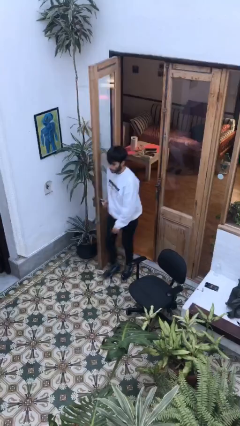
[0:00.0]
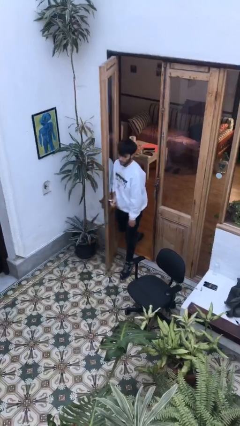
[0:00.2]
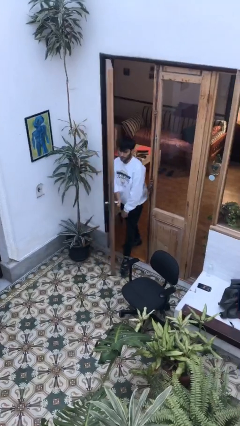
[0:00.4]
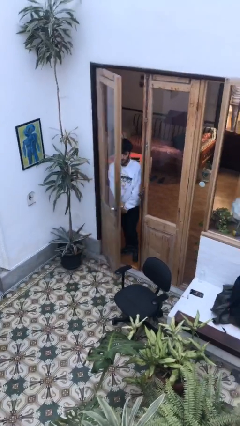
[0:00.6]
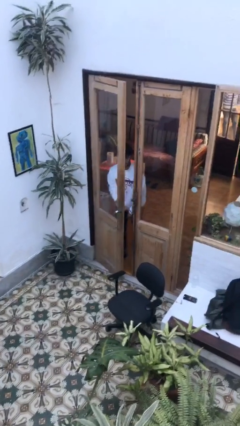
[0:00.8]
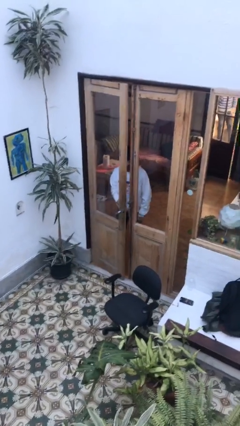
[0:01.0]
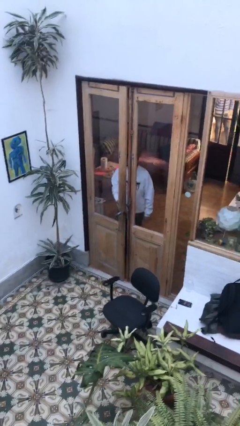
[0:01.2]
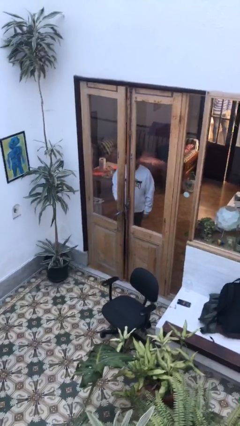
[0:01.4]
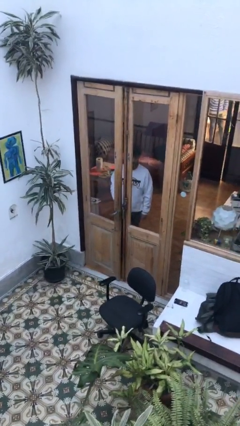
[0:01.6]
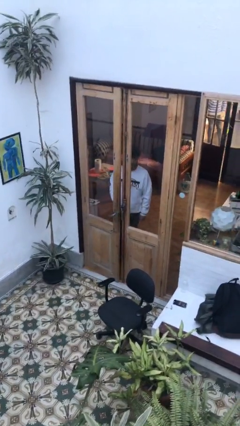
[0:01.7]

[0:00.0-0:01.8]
person closes facility door

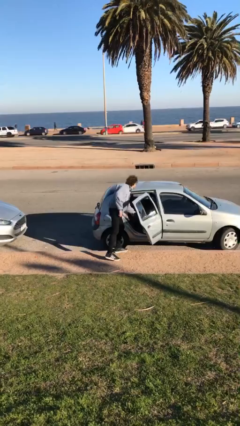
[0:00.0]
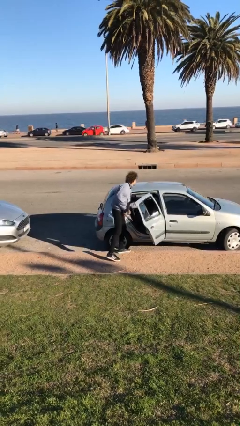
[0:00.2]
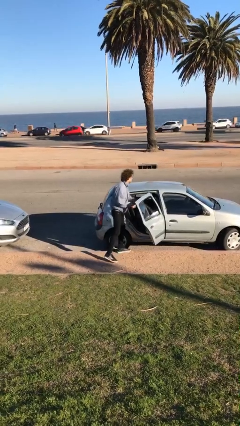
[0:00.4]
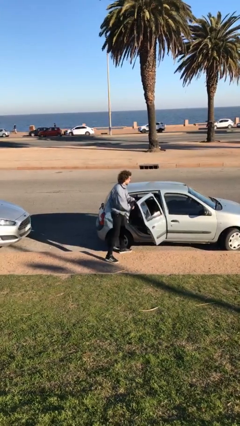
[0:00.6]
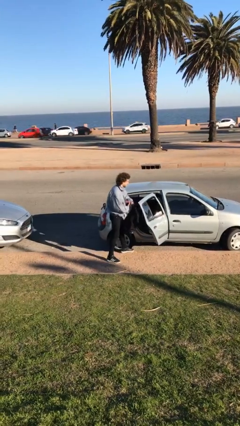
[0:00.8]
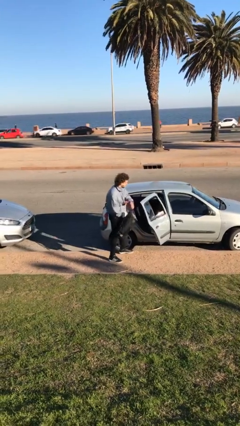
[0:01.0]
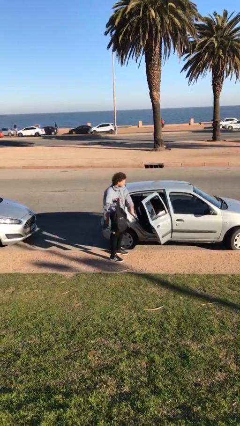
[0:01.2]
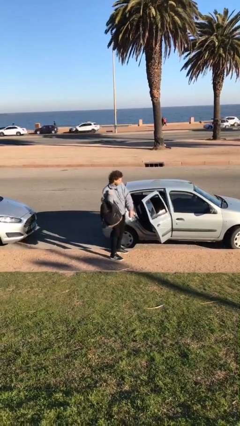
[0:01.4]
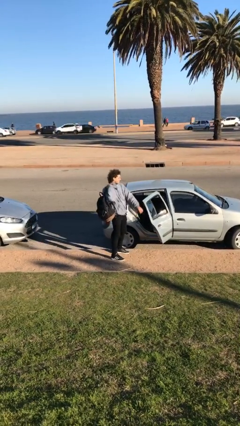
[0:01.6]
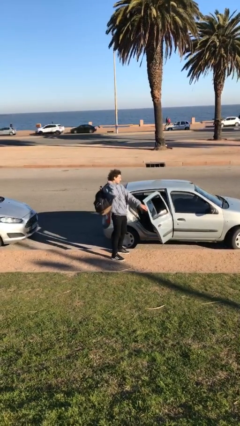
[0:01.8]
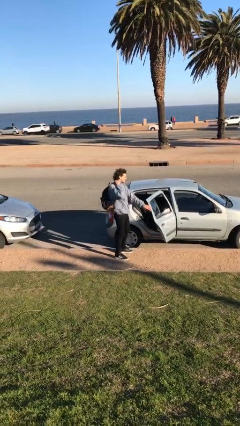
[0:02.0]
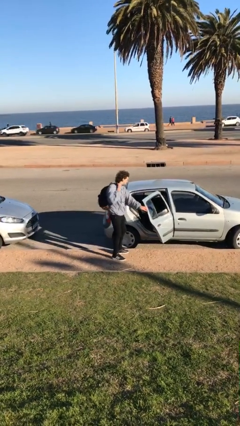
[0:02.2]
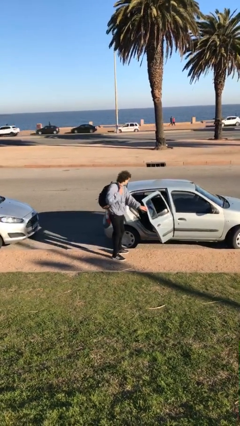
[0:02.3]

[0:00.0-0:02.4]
person unloads car

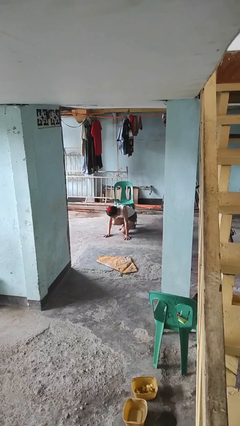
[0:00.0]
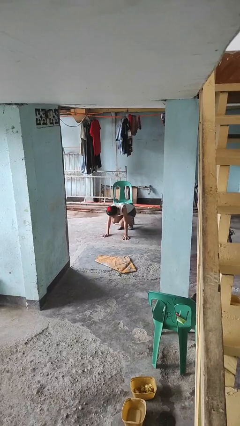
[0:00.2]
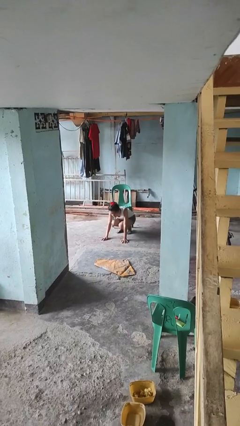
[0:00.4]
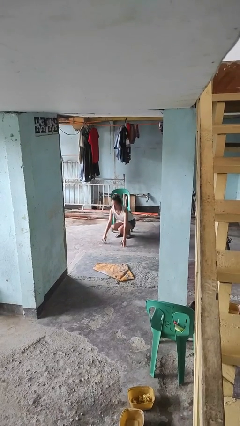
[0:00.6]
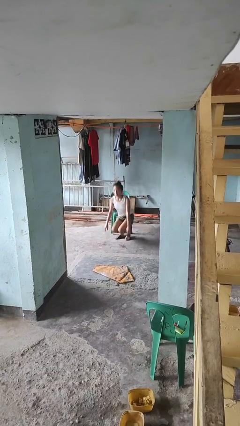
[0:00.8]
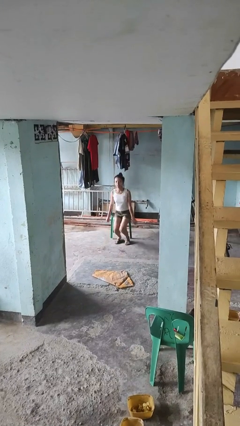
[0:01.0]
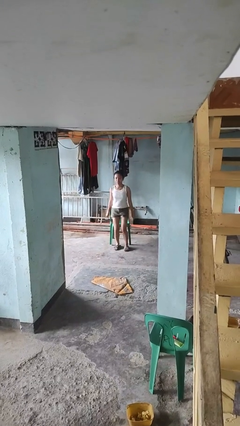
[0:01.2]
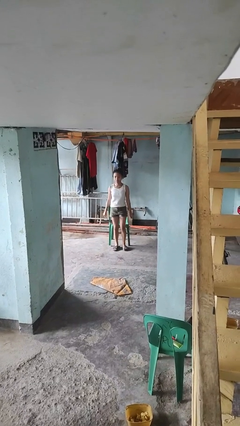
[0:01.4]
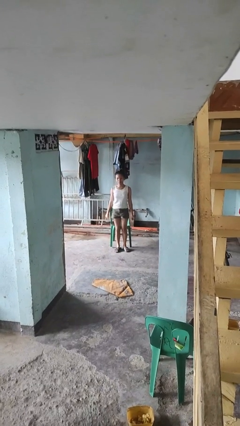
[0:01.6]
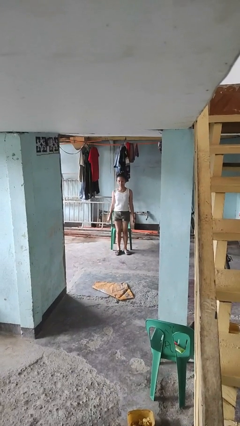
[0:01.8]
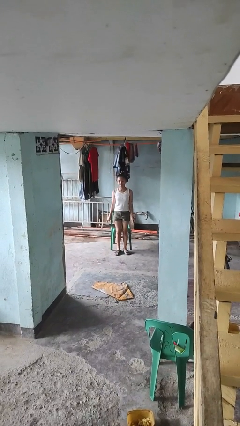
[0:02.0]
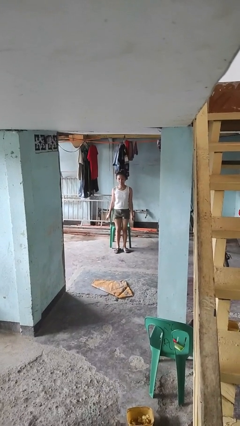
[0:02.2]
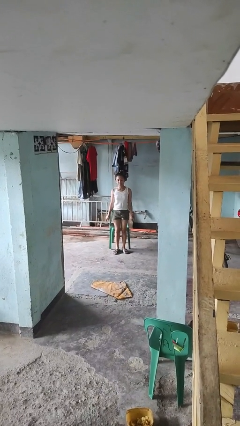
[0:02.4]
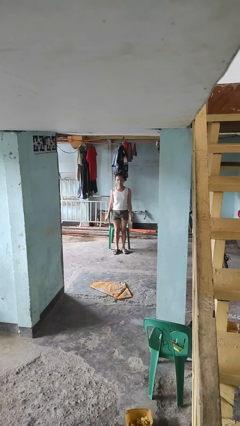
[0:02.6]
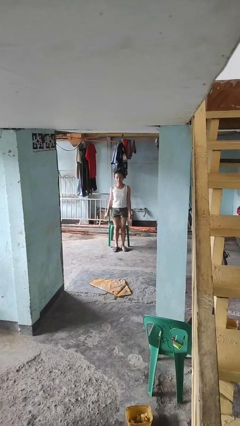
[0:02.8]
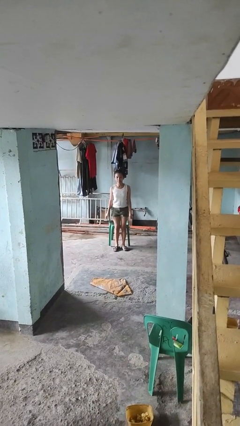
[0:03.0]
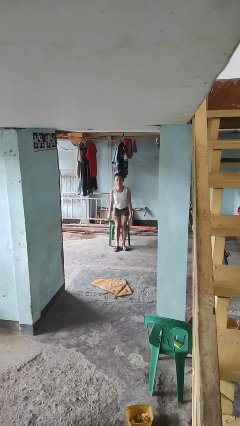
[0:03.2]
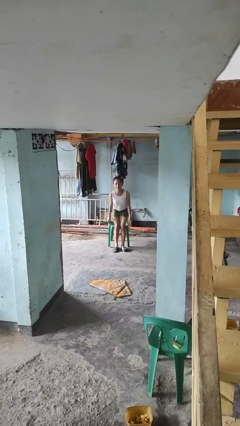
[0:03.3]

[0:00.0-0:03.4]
person stands up from floor

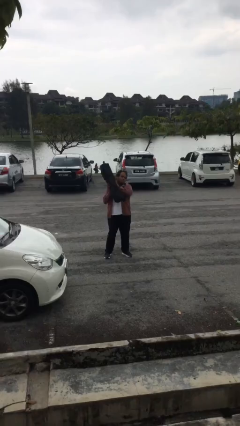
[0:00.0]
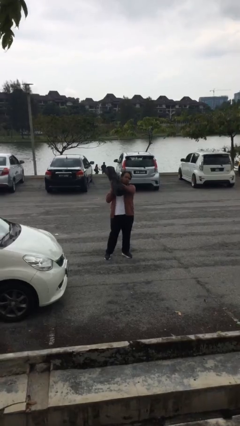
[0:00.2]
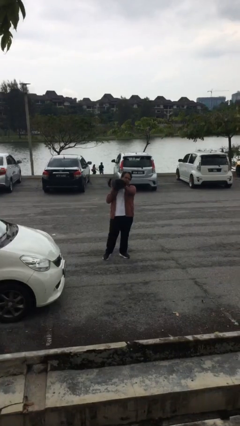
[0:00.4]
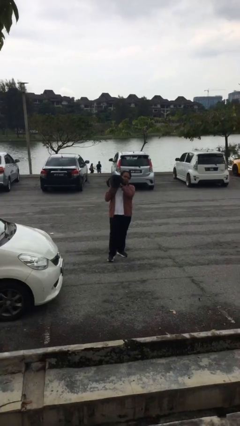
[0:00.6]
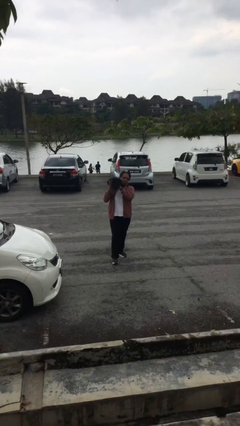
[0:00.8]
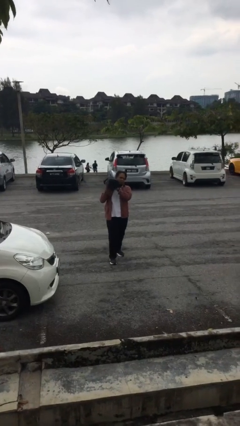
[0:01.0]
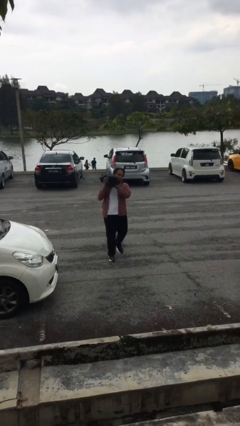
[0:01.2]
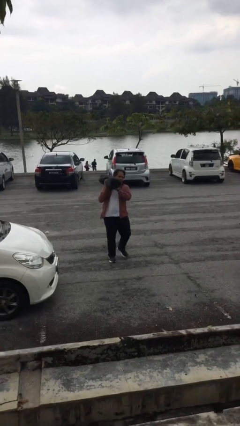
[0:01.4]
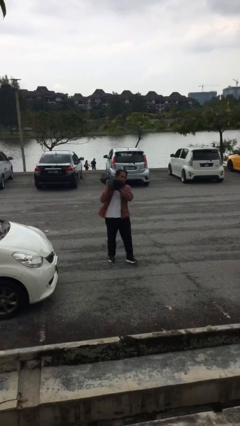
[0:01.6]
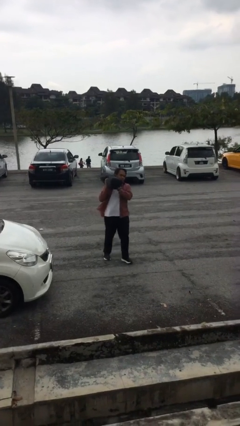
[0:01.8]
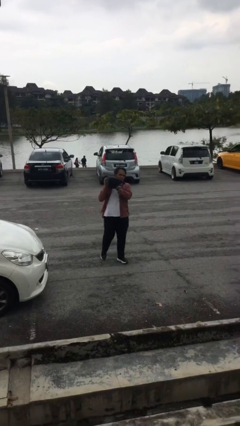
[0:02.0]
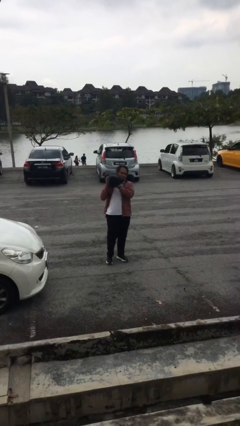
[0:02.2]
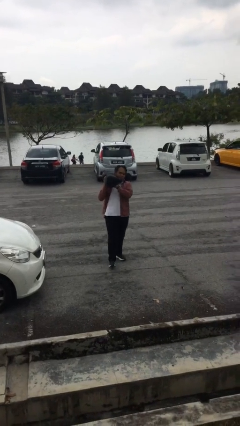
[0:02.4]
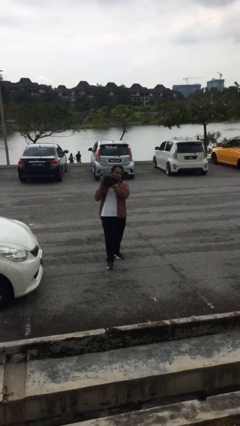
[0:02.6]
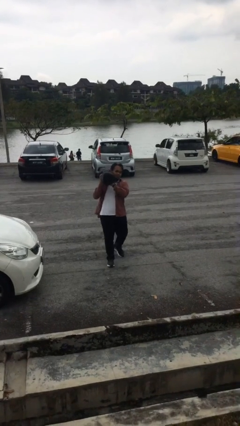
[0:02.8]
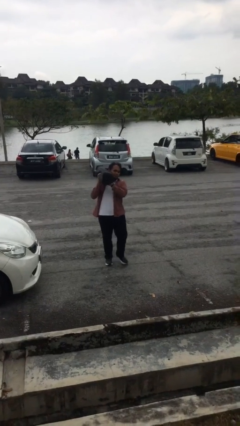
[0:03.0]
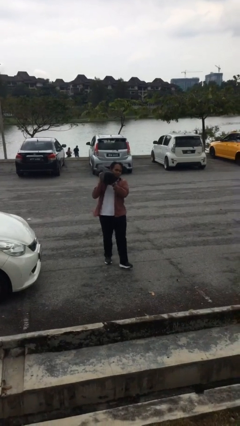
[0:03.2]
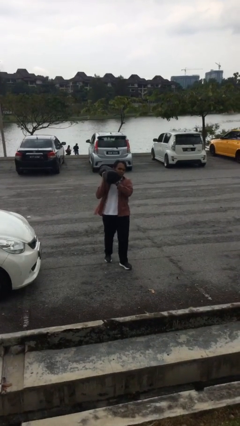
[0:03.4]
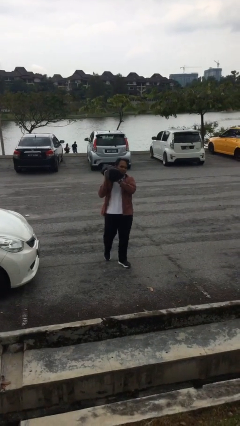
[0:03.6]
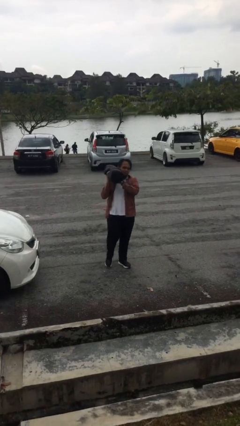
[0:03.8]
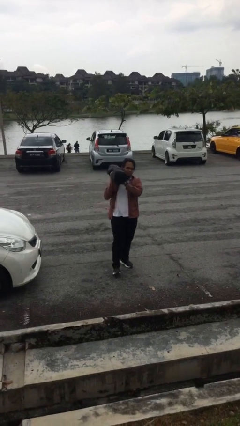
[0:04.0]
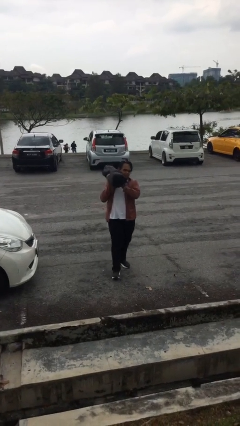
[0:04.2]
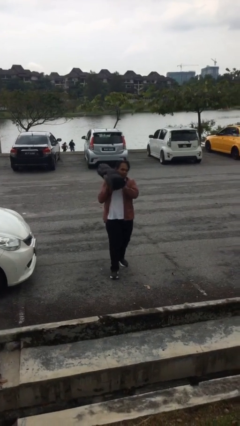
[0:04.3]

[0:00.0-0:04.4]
person carries heavy object

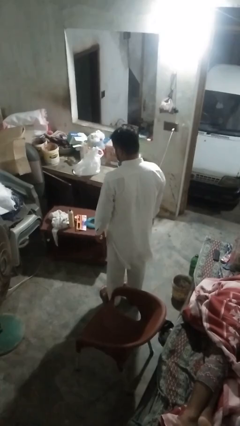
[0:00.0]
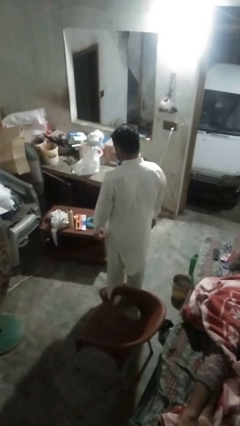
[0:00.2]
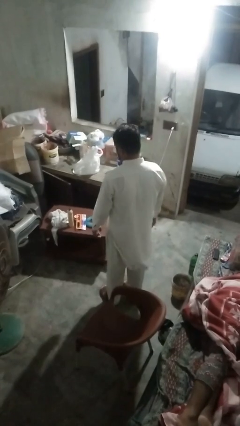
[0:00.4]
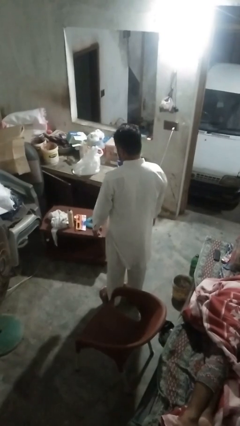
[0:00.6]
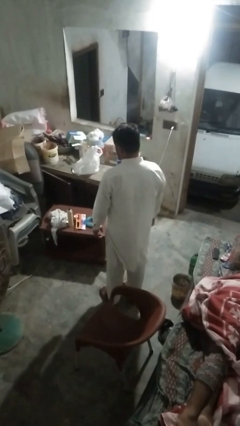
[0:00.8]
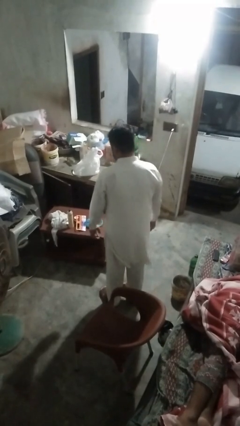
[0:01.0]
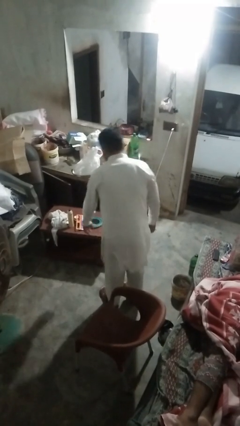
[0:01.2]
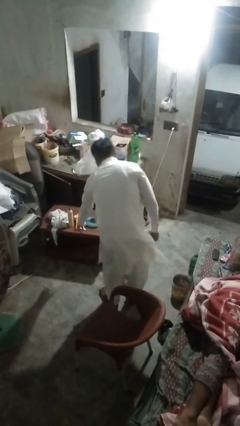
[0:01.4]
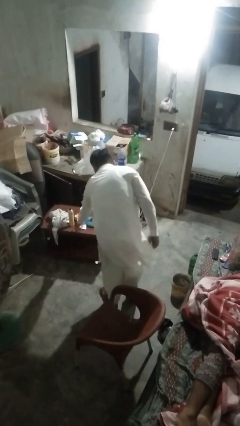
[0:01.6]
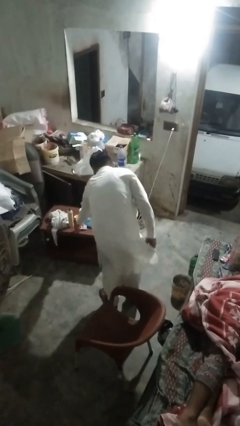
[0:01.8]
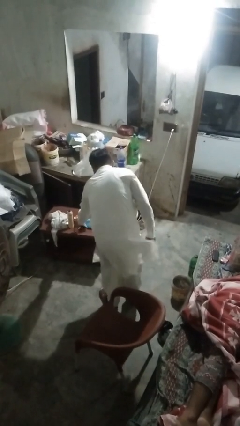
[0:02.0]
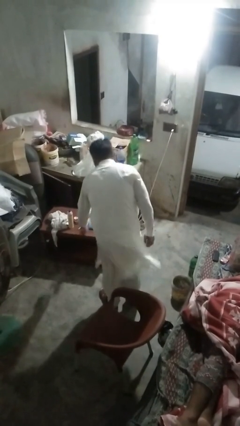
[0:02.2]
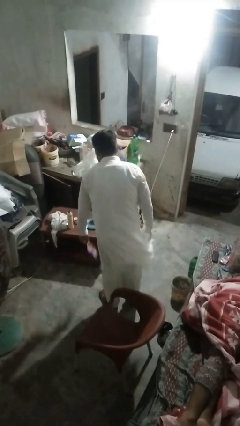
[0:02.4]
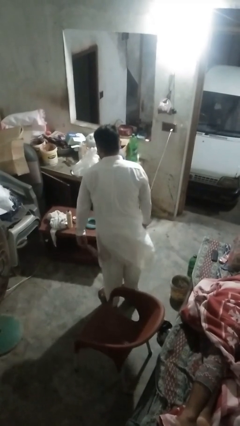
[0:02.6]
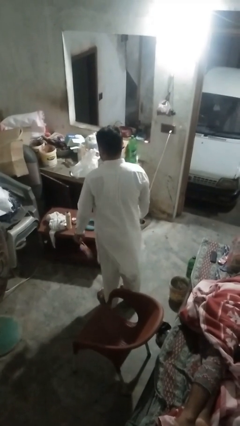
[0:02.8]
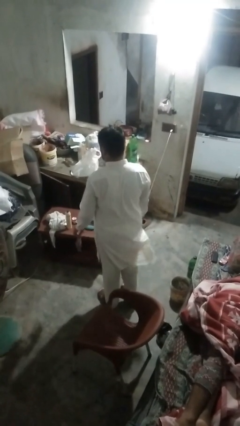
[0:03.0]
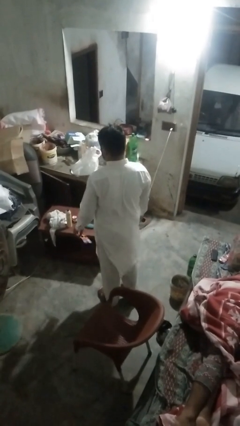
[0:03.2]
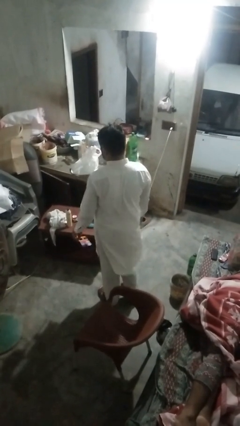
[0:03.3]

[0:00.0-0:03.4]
person picks up object from table

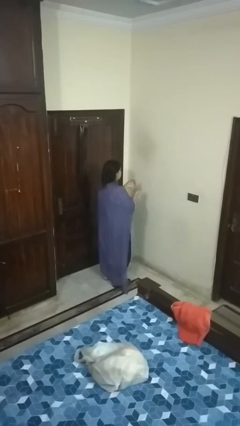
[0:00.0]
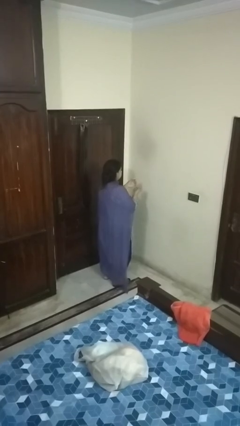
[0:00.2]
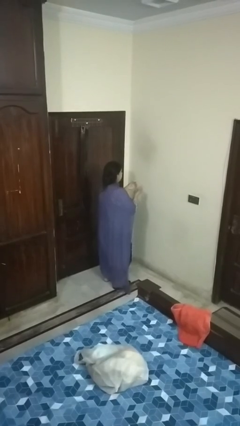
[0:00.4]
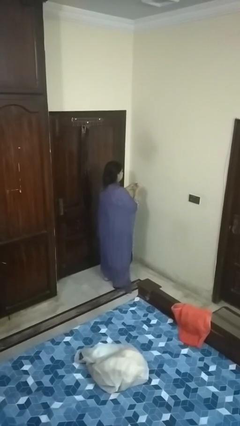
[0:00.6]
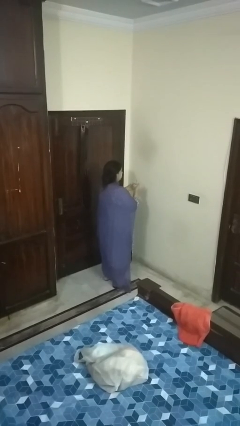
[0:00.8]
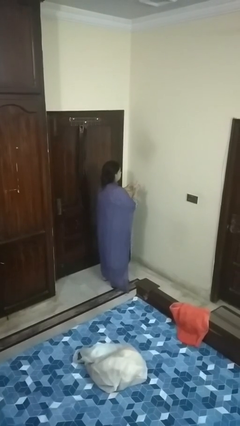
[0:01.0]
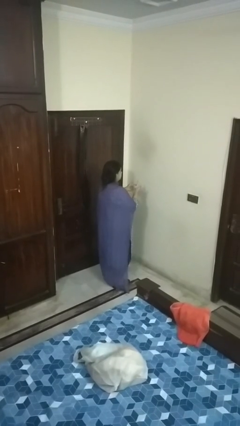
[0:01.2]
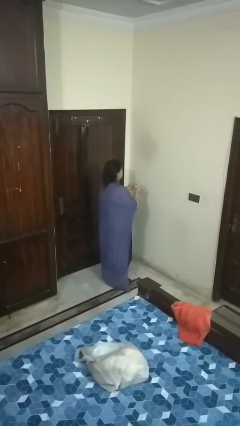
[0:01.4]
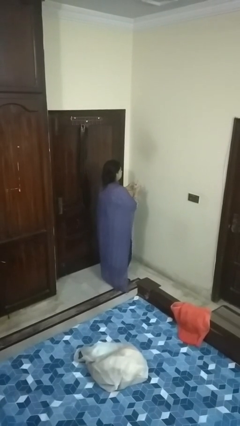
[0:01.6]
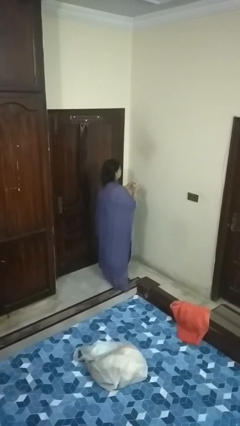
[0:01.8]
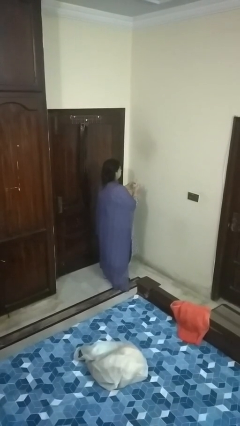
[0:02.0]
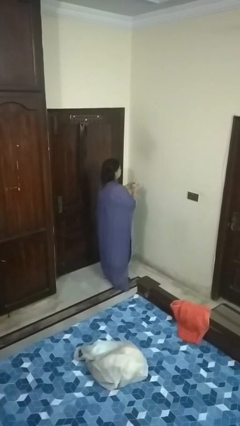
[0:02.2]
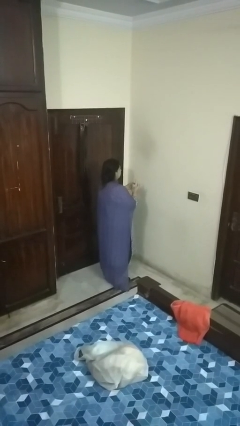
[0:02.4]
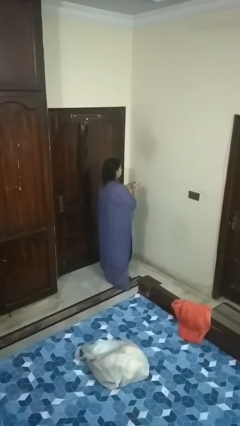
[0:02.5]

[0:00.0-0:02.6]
person puts on ring
